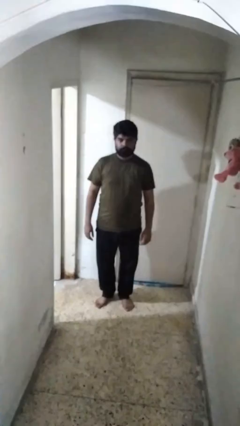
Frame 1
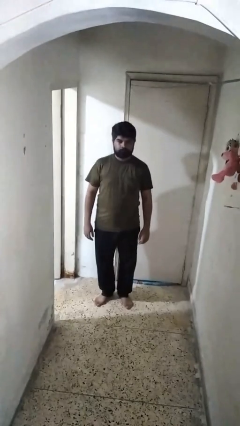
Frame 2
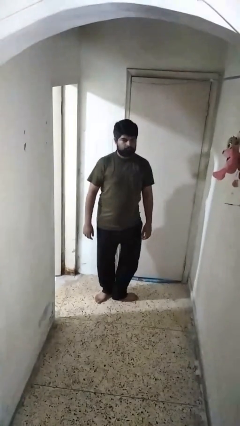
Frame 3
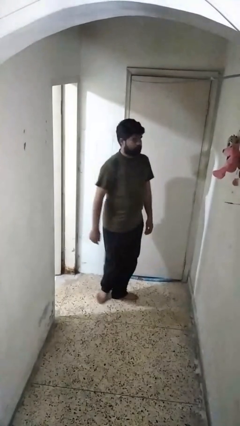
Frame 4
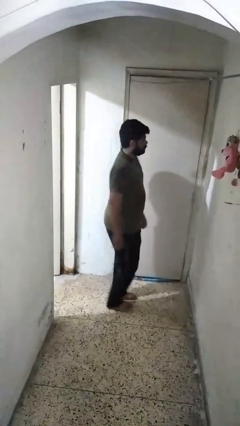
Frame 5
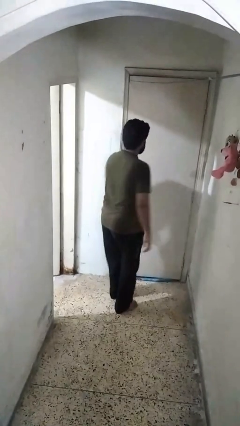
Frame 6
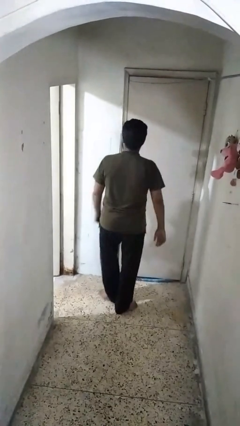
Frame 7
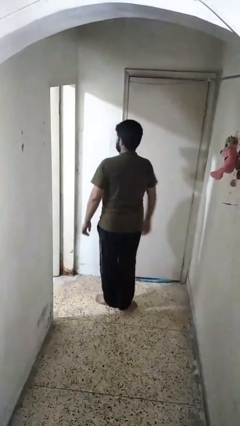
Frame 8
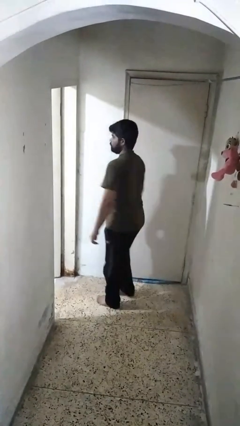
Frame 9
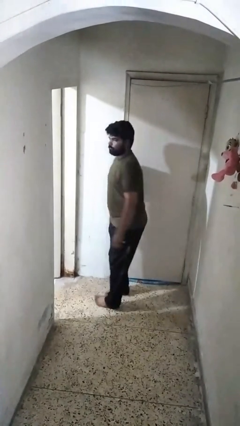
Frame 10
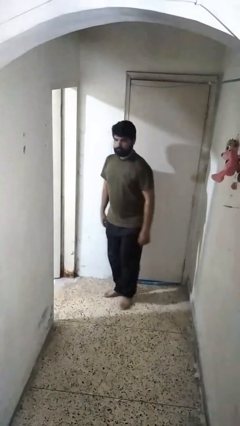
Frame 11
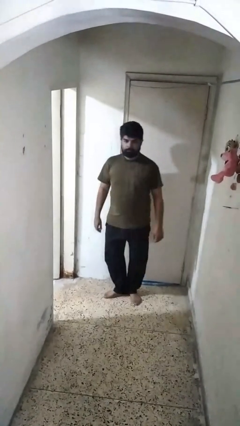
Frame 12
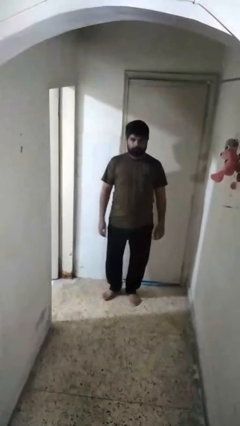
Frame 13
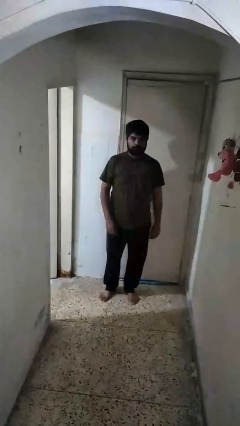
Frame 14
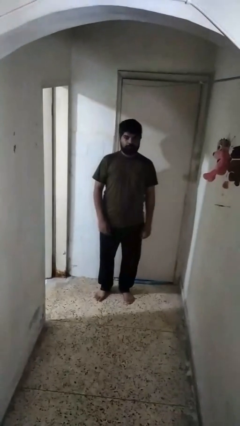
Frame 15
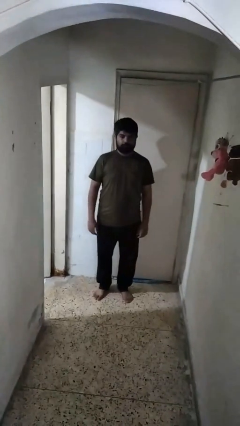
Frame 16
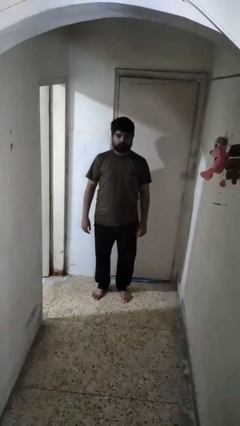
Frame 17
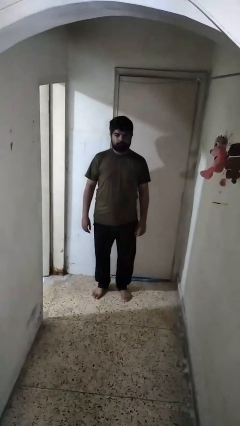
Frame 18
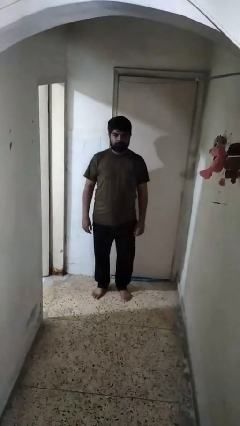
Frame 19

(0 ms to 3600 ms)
person twirls

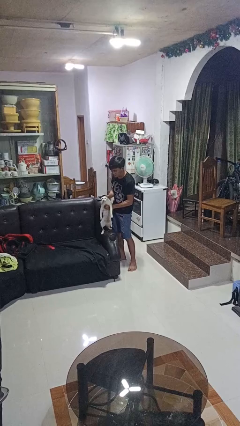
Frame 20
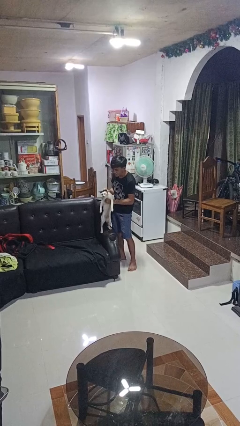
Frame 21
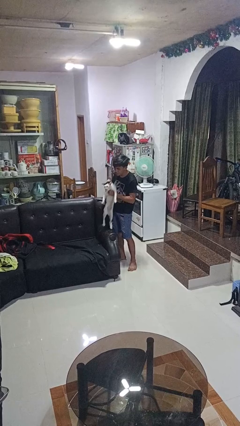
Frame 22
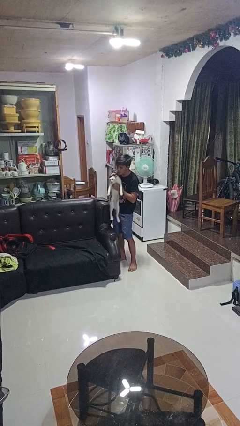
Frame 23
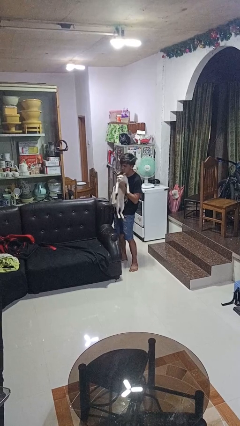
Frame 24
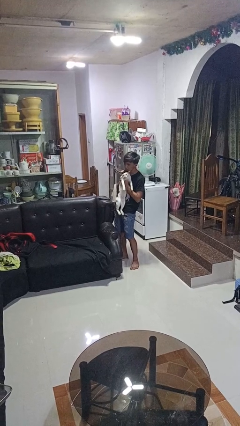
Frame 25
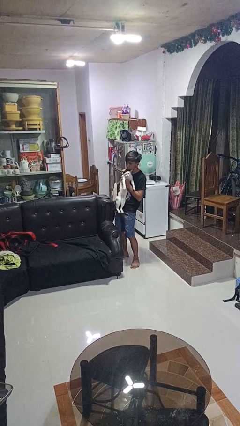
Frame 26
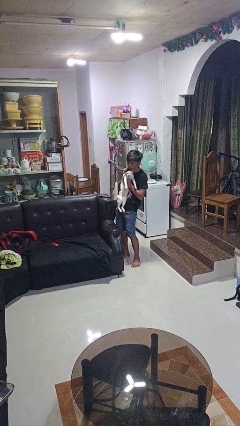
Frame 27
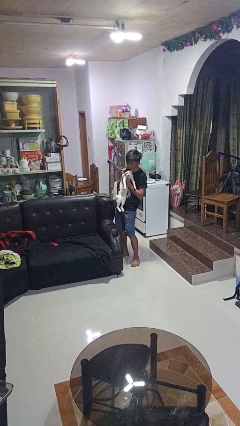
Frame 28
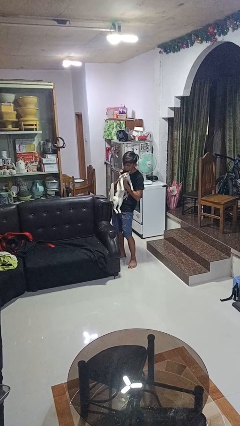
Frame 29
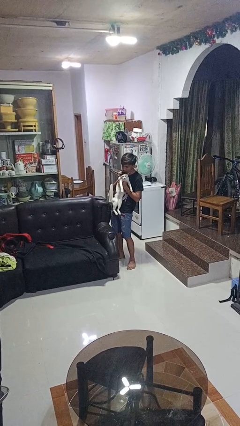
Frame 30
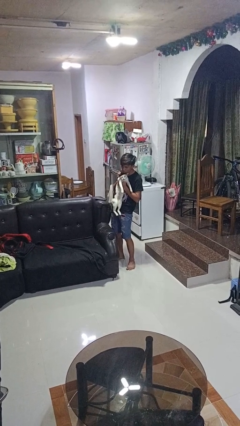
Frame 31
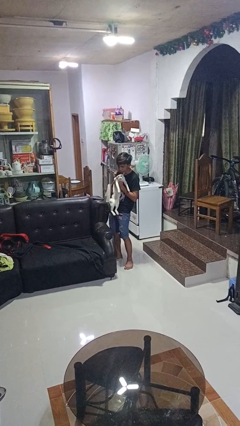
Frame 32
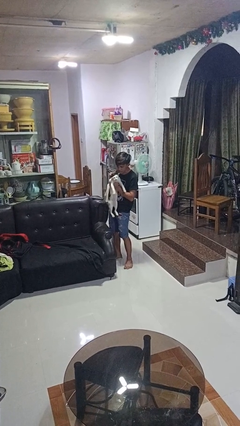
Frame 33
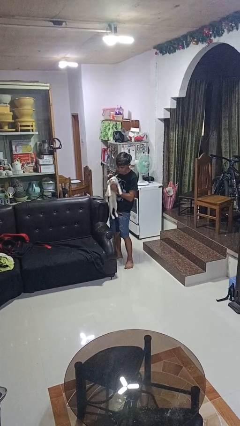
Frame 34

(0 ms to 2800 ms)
person hugs cat

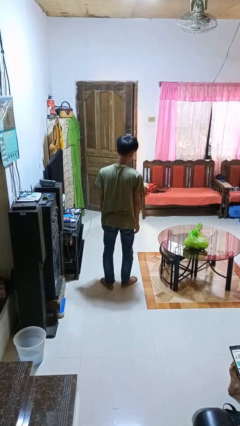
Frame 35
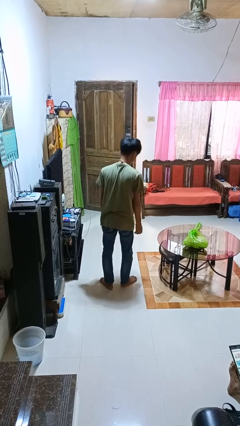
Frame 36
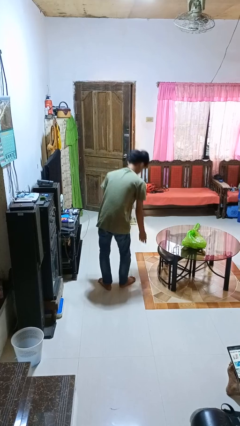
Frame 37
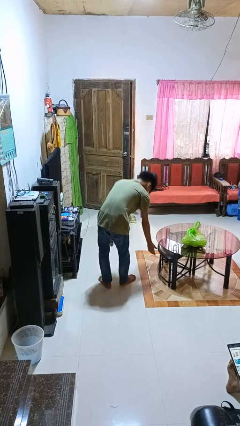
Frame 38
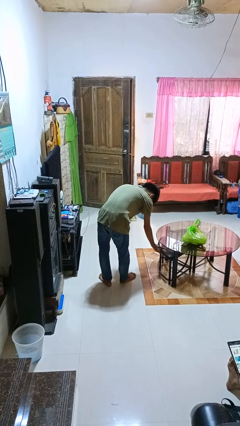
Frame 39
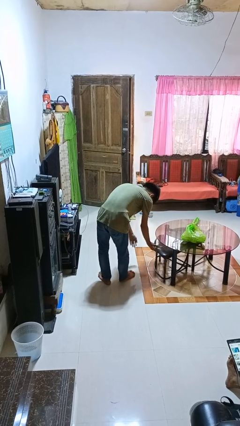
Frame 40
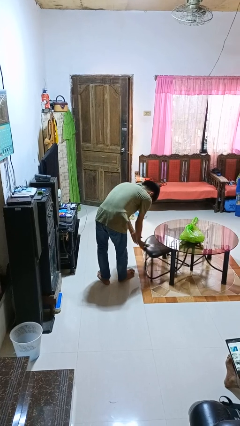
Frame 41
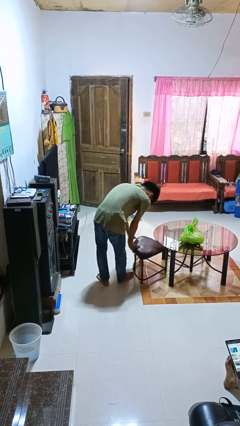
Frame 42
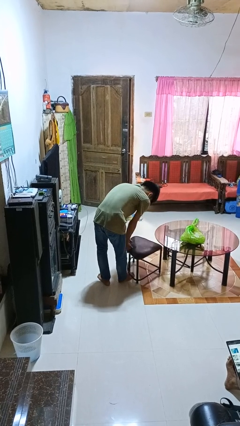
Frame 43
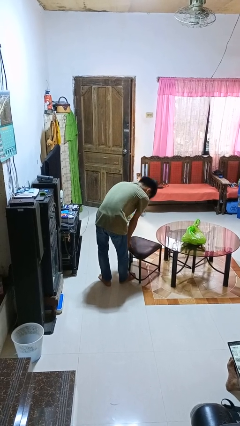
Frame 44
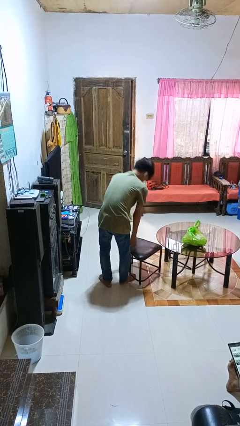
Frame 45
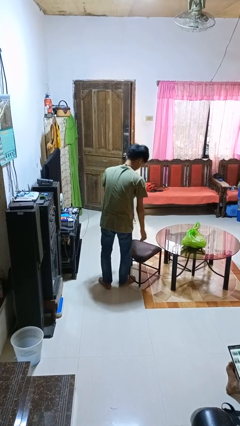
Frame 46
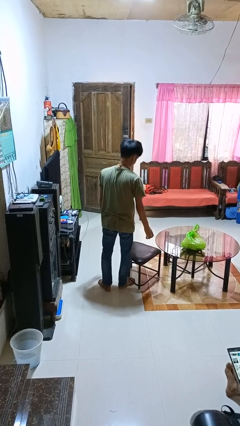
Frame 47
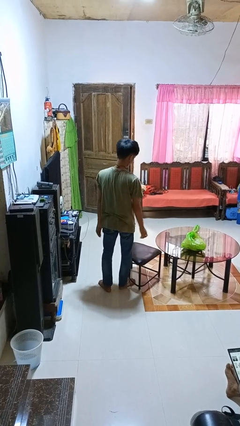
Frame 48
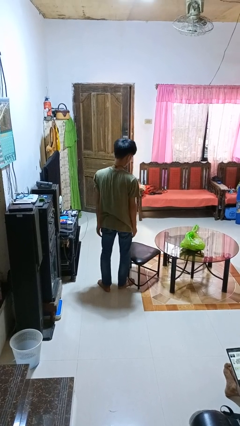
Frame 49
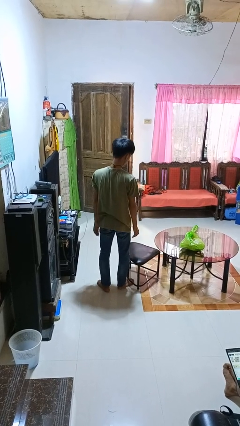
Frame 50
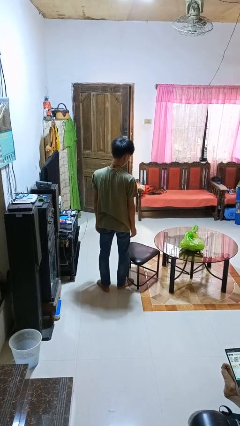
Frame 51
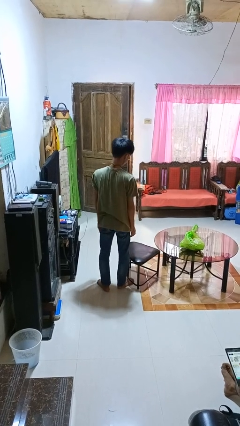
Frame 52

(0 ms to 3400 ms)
person pulls out chair

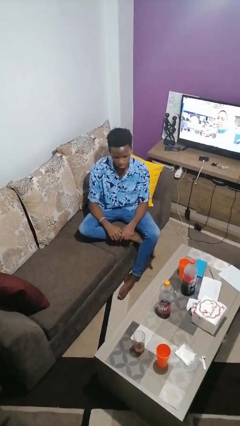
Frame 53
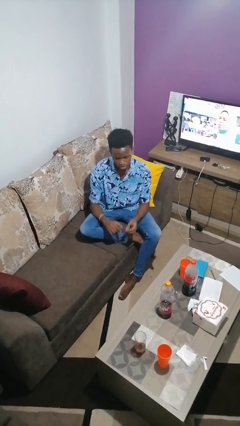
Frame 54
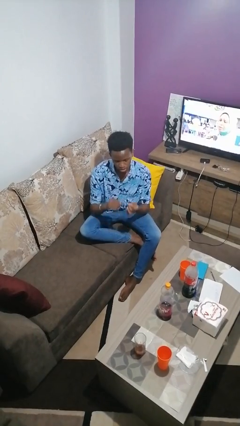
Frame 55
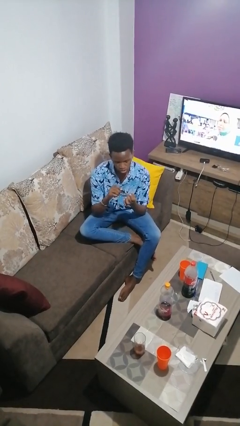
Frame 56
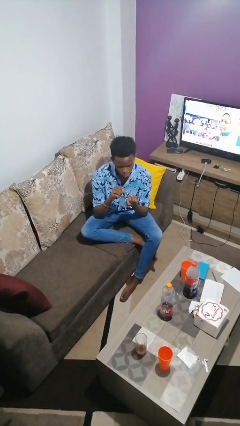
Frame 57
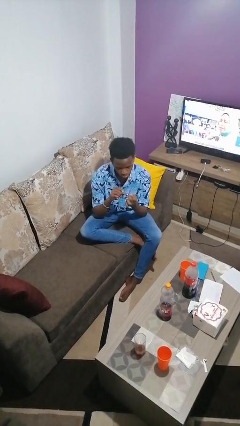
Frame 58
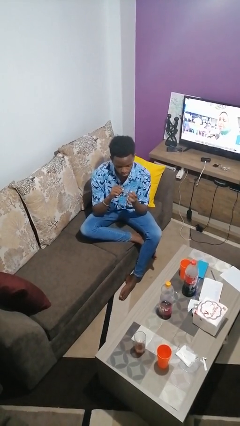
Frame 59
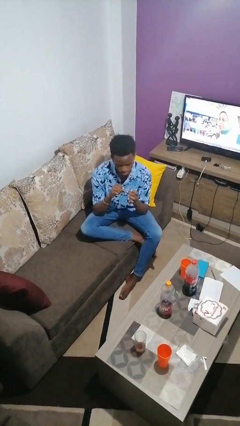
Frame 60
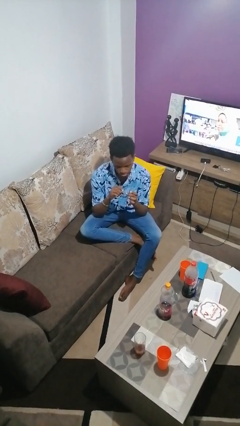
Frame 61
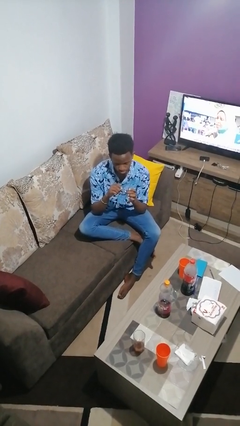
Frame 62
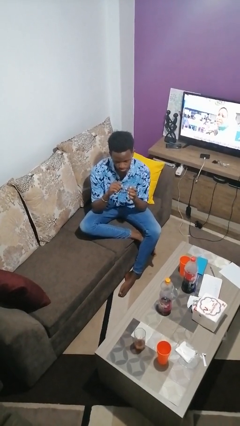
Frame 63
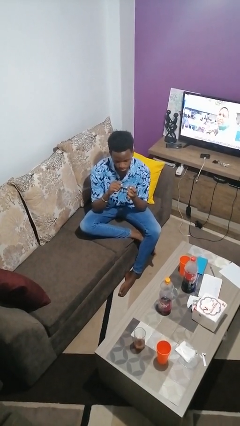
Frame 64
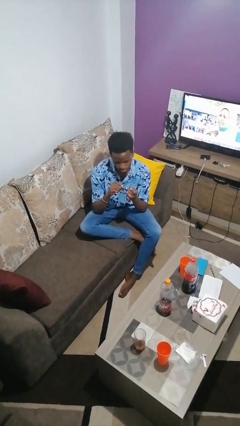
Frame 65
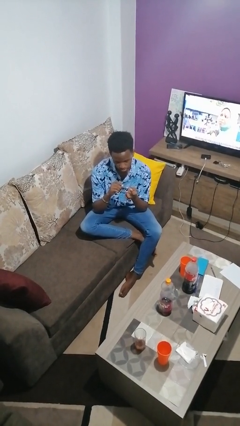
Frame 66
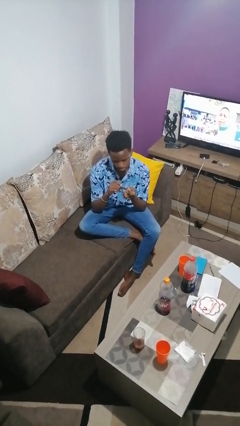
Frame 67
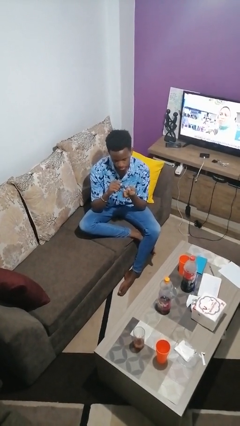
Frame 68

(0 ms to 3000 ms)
person clips fingernails

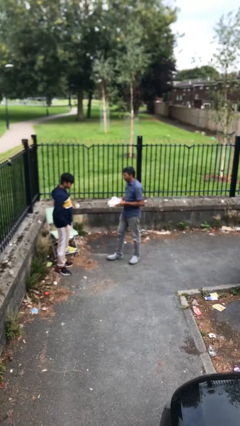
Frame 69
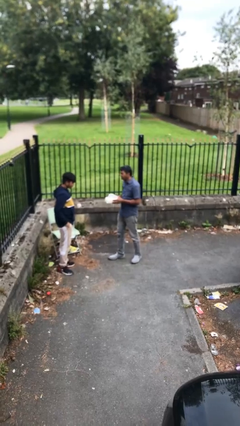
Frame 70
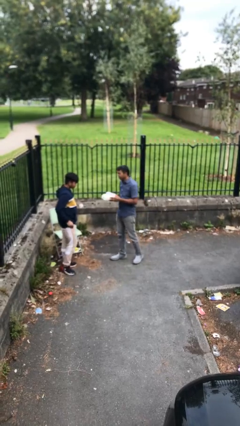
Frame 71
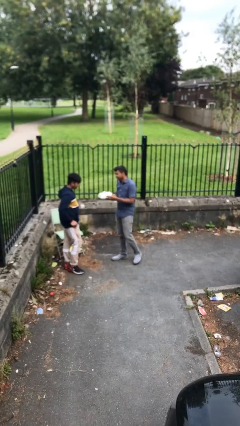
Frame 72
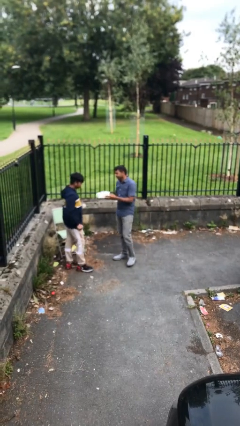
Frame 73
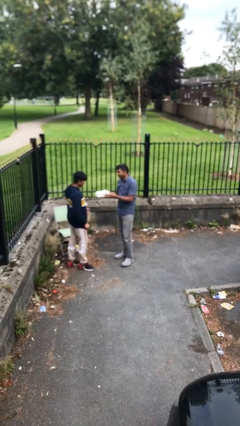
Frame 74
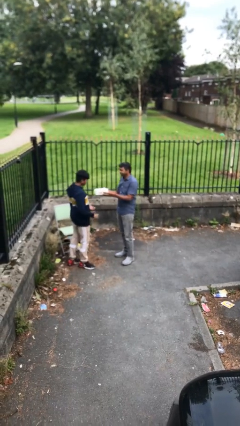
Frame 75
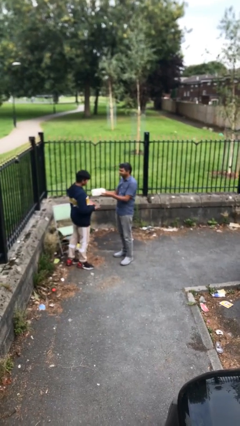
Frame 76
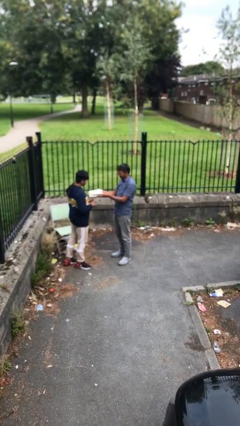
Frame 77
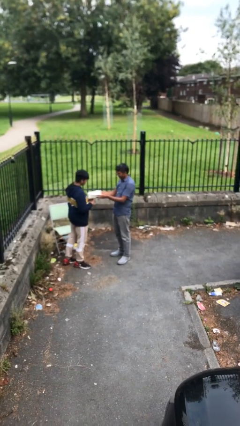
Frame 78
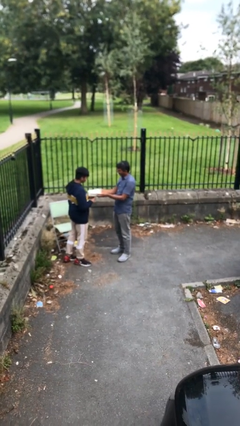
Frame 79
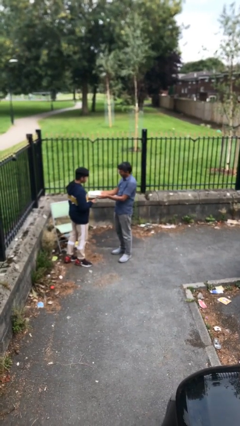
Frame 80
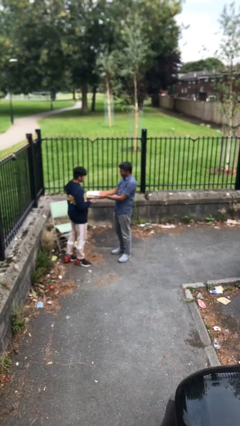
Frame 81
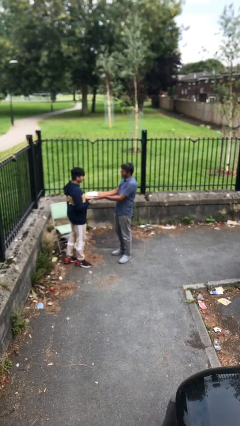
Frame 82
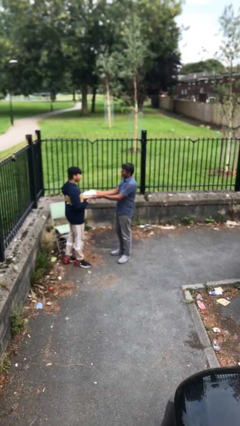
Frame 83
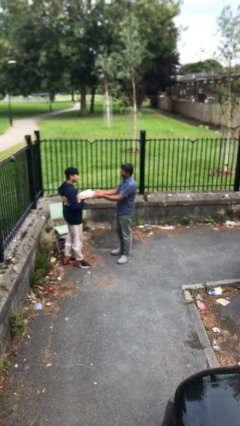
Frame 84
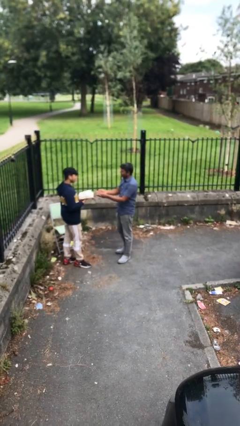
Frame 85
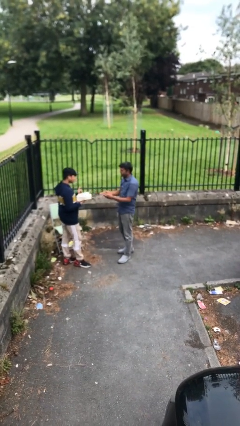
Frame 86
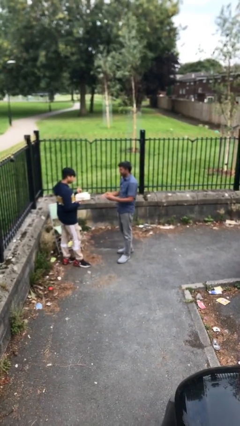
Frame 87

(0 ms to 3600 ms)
person transfers object to person

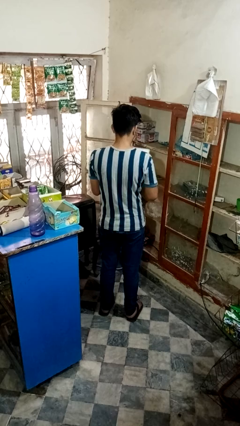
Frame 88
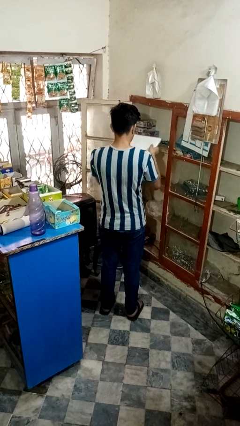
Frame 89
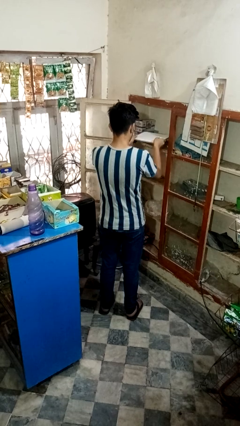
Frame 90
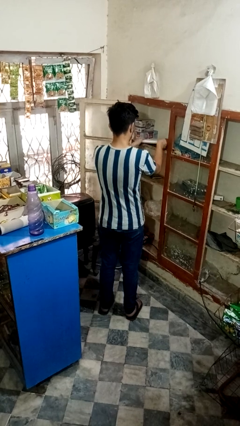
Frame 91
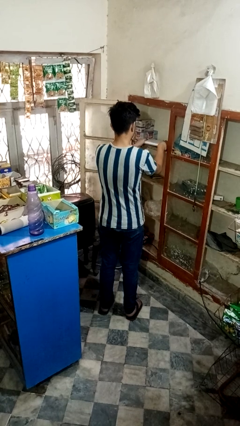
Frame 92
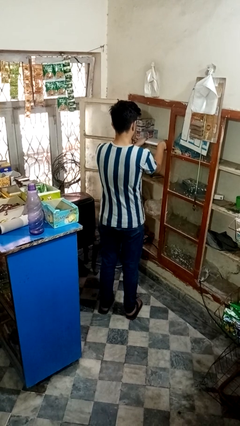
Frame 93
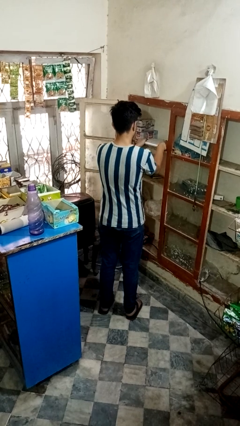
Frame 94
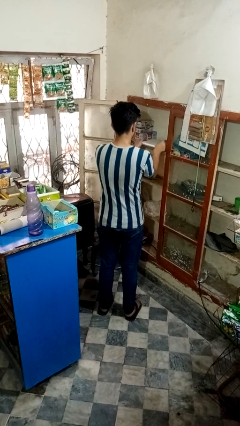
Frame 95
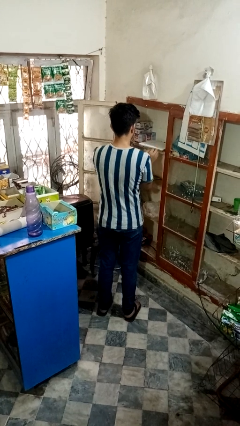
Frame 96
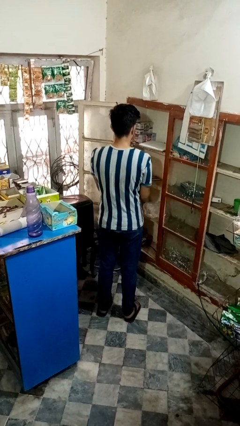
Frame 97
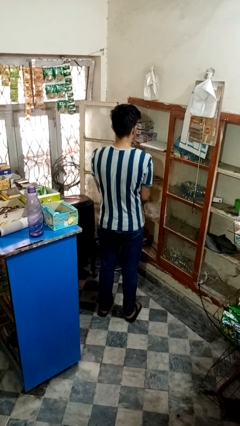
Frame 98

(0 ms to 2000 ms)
person puts down object into cabinet
